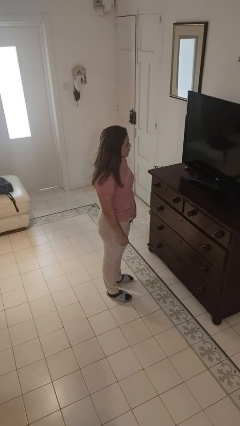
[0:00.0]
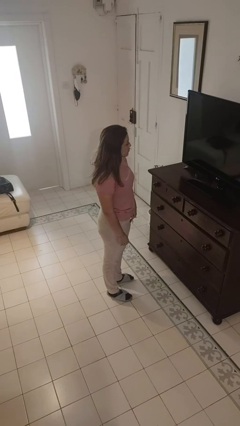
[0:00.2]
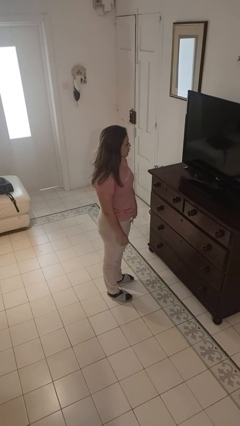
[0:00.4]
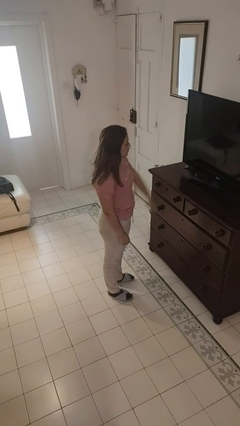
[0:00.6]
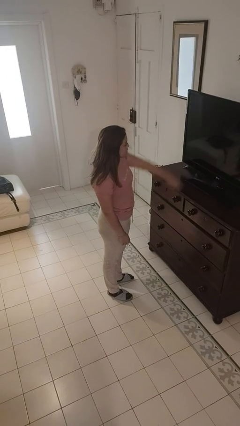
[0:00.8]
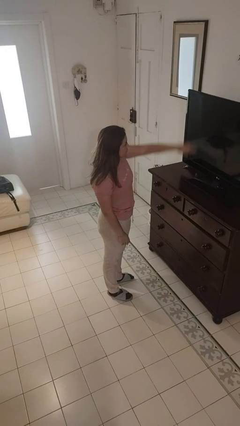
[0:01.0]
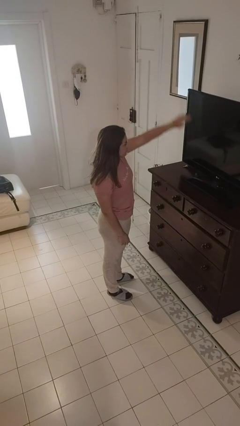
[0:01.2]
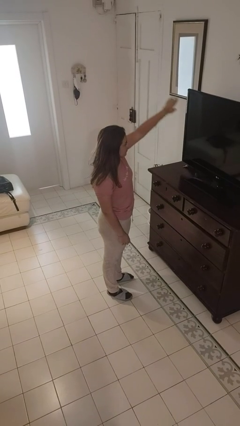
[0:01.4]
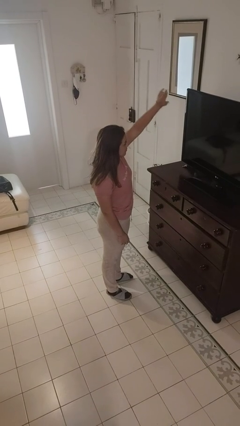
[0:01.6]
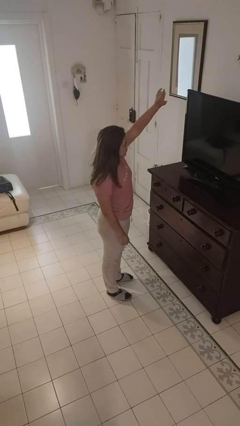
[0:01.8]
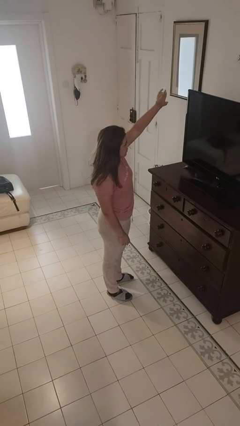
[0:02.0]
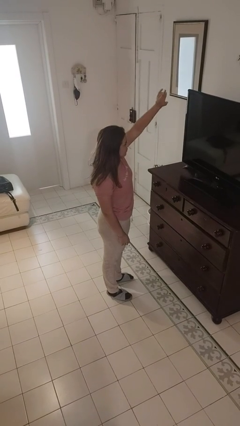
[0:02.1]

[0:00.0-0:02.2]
person gestures swipe up

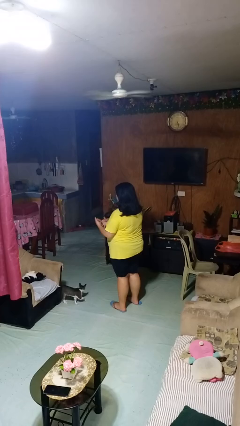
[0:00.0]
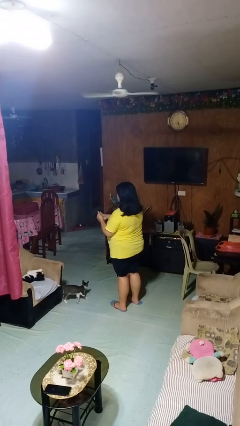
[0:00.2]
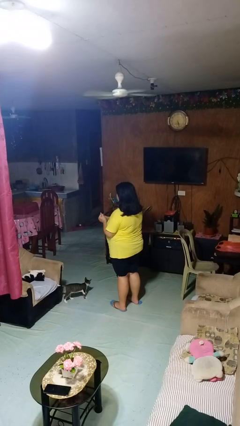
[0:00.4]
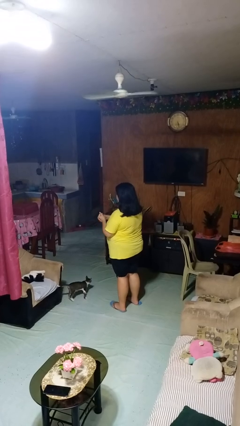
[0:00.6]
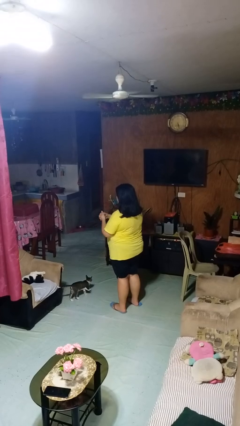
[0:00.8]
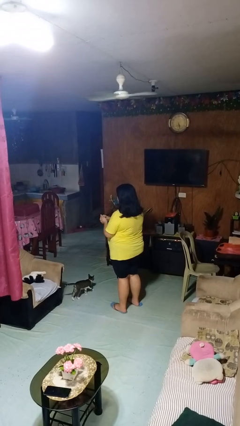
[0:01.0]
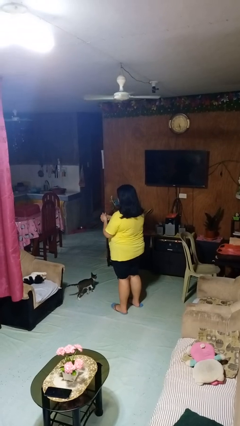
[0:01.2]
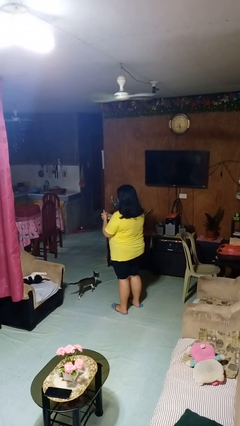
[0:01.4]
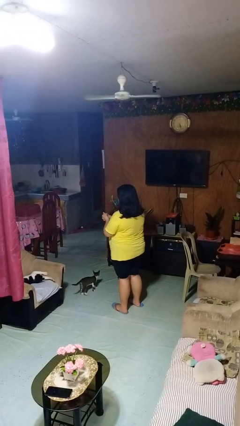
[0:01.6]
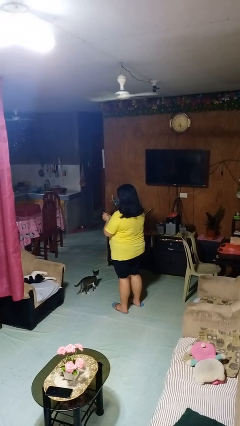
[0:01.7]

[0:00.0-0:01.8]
person cracks knuckles

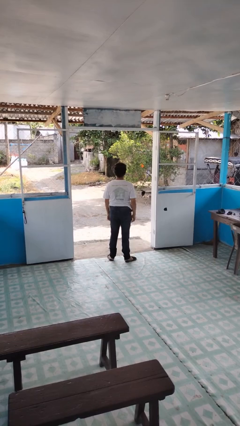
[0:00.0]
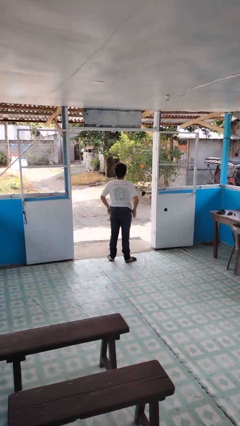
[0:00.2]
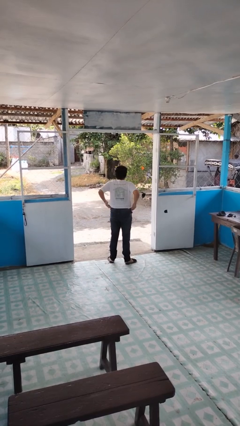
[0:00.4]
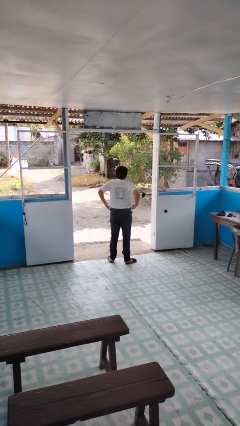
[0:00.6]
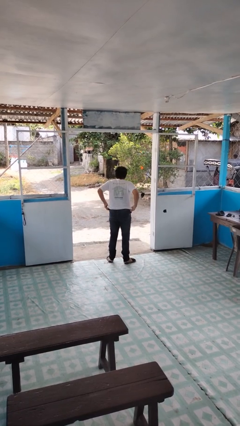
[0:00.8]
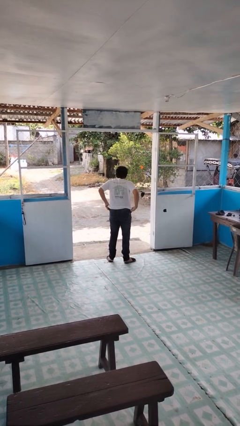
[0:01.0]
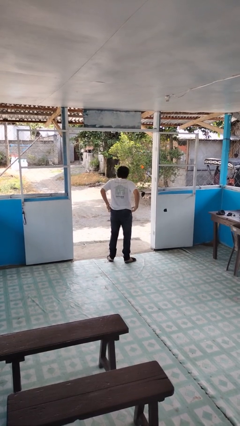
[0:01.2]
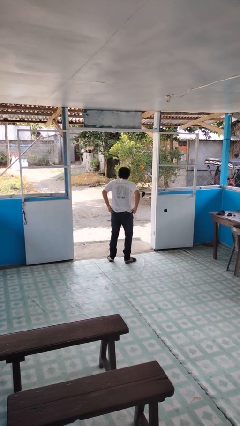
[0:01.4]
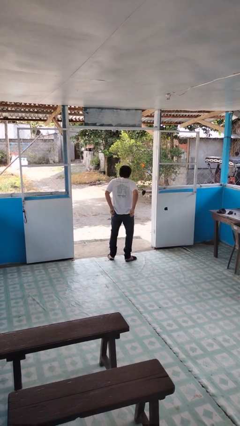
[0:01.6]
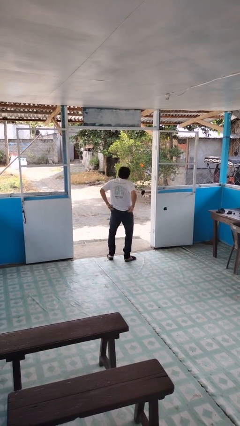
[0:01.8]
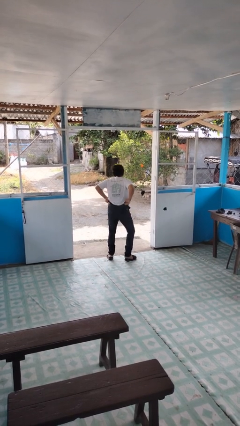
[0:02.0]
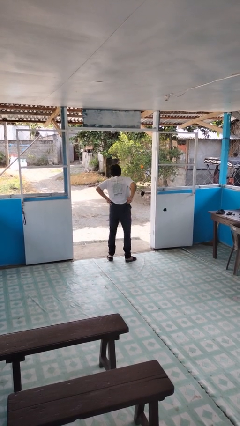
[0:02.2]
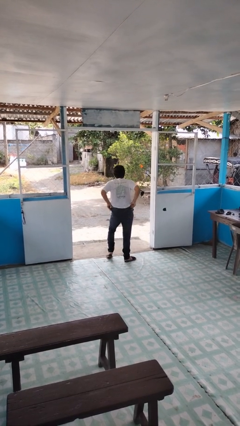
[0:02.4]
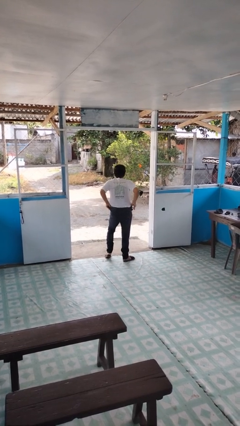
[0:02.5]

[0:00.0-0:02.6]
person hikes up pants

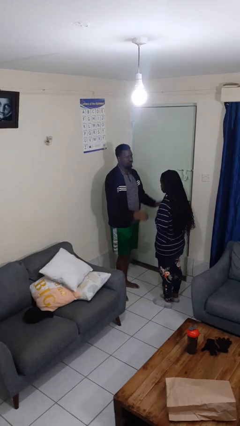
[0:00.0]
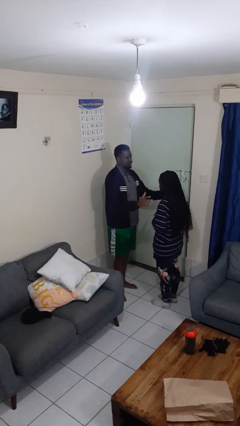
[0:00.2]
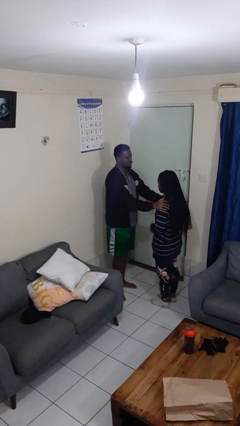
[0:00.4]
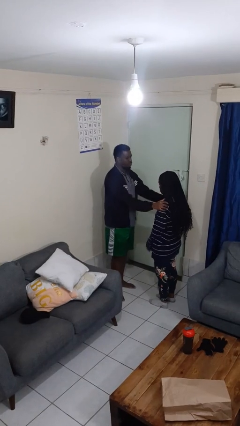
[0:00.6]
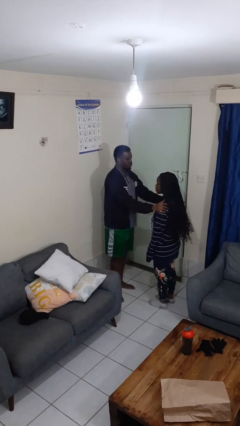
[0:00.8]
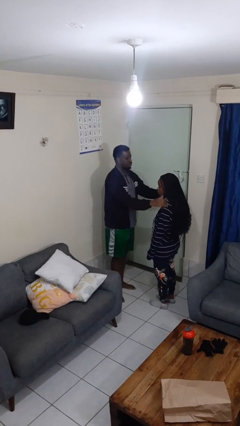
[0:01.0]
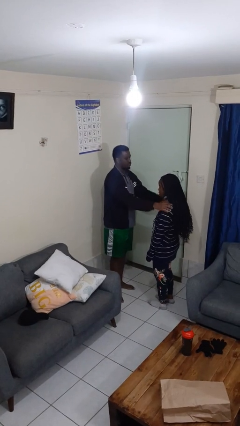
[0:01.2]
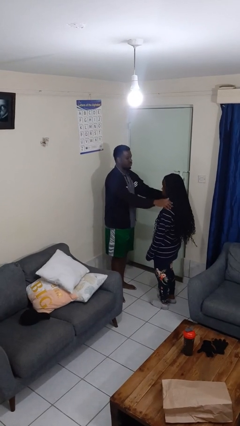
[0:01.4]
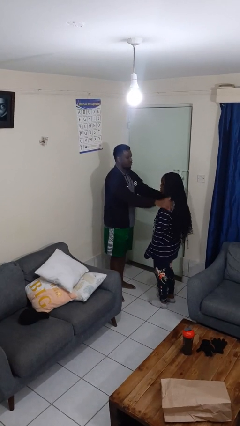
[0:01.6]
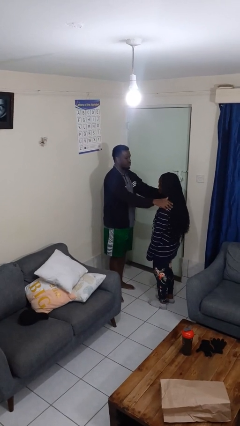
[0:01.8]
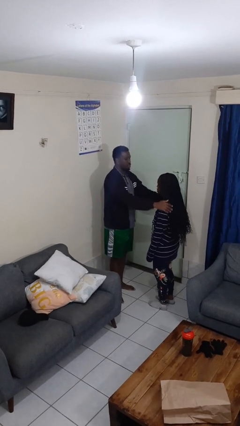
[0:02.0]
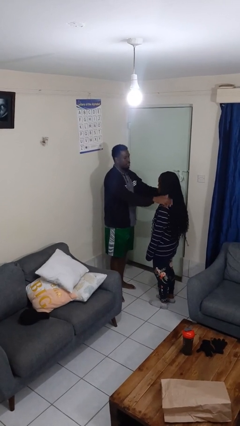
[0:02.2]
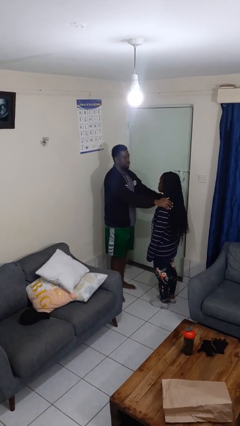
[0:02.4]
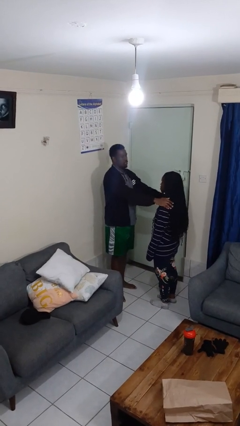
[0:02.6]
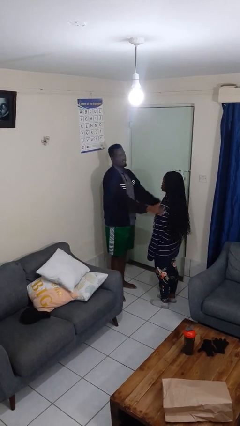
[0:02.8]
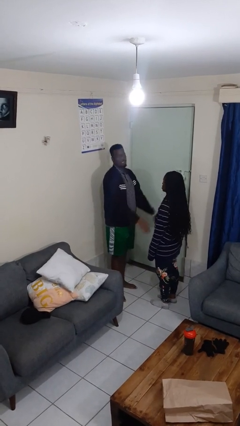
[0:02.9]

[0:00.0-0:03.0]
person pounds shoulders of person

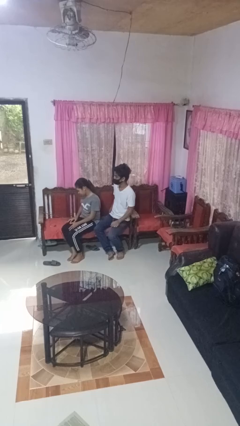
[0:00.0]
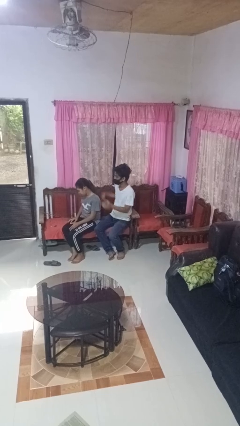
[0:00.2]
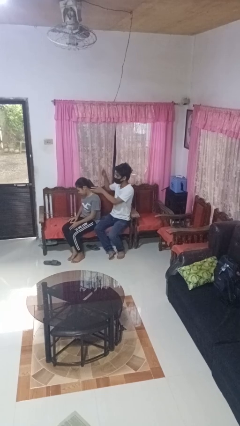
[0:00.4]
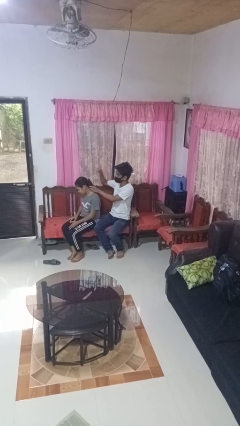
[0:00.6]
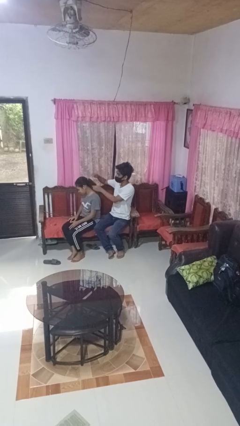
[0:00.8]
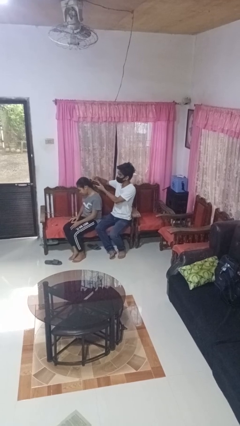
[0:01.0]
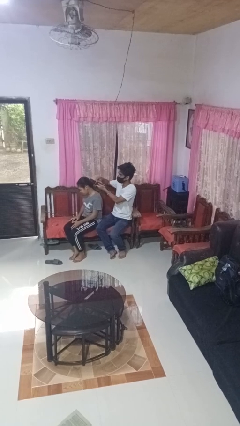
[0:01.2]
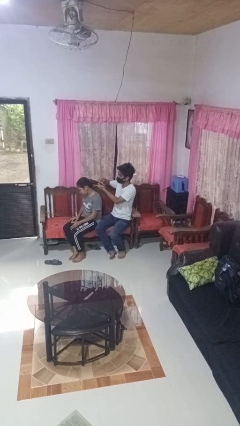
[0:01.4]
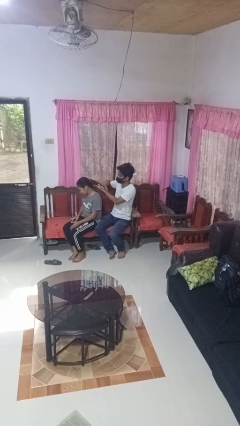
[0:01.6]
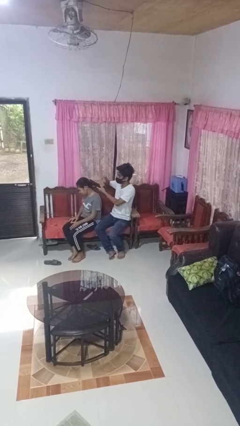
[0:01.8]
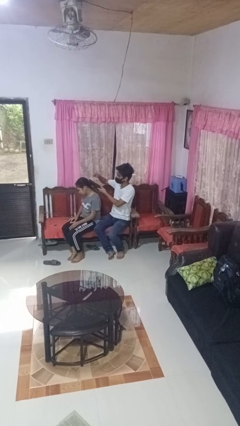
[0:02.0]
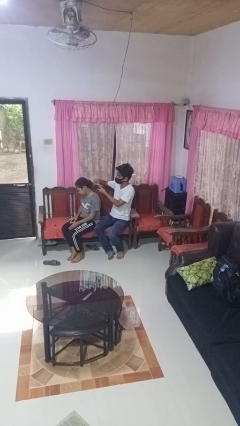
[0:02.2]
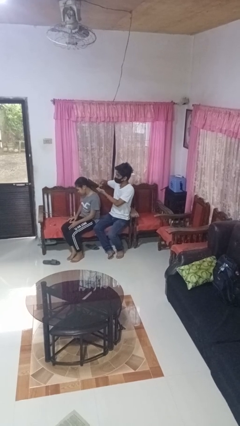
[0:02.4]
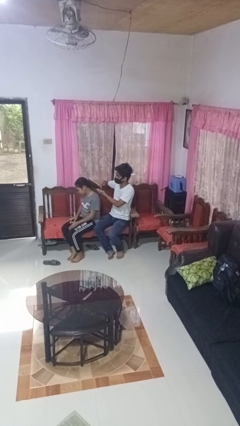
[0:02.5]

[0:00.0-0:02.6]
person brushes hair of person

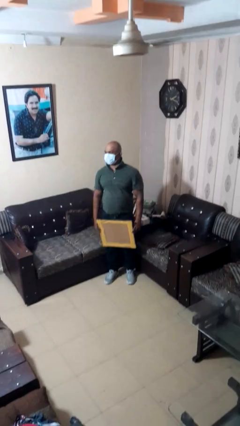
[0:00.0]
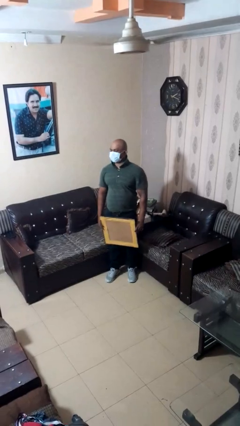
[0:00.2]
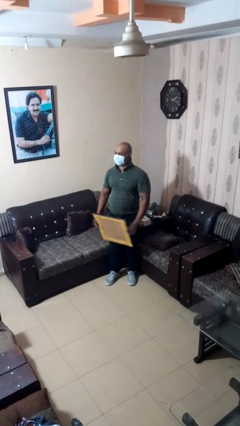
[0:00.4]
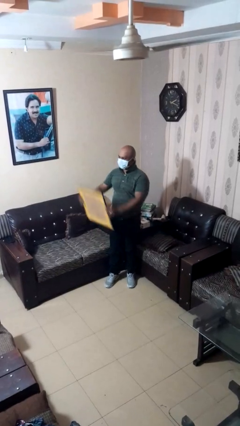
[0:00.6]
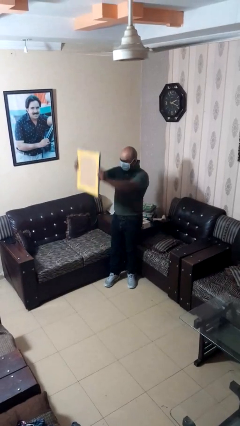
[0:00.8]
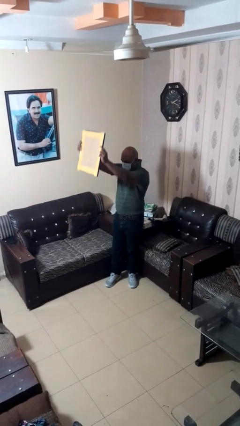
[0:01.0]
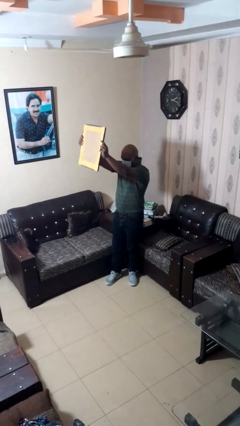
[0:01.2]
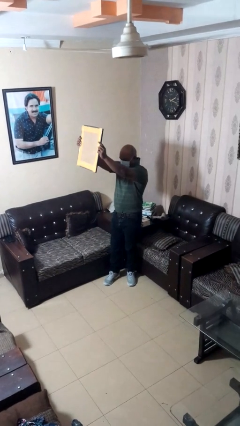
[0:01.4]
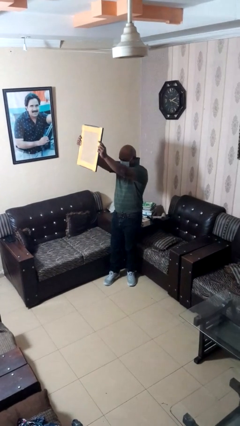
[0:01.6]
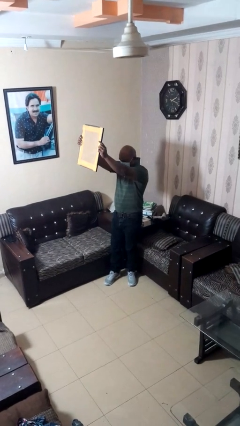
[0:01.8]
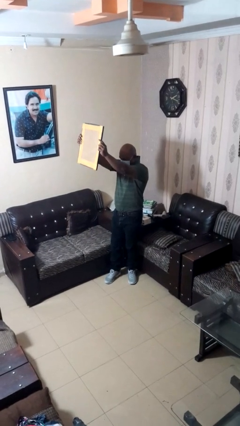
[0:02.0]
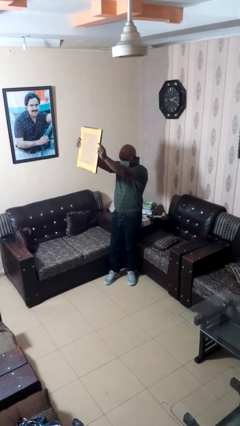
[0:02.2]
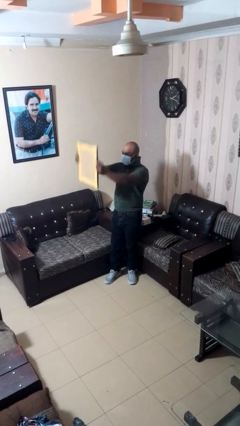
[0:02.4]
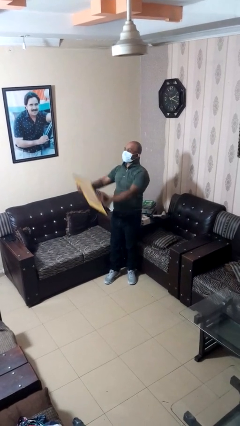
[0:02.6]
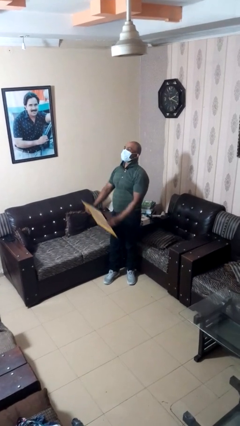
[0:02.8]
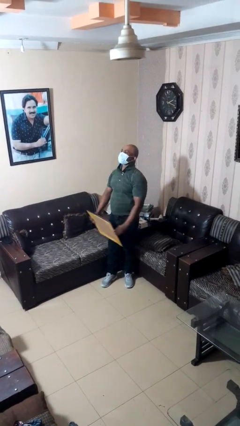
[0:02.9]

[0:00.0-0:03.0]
person holds object above head

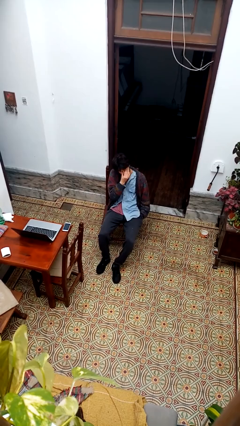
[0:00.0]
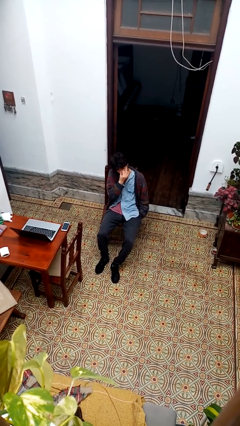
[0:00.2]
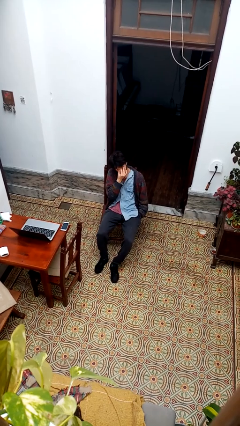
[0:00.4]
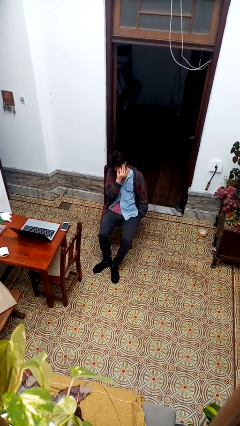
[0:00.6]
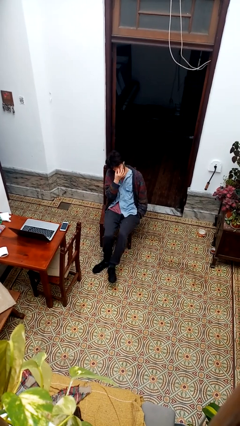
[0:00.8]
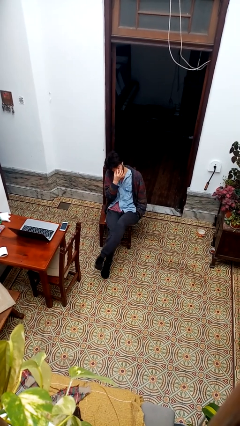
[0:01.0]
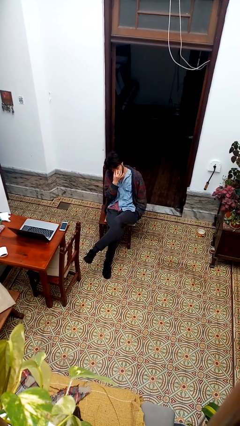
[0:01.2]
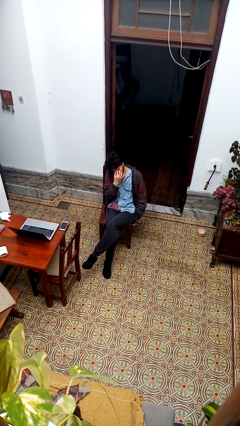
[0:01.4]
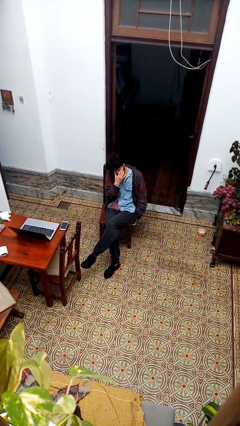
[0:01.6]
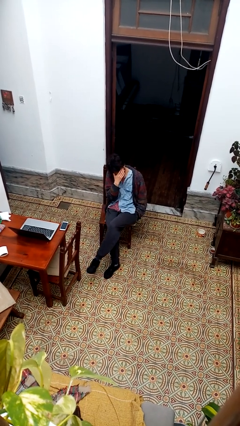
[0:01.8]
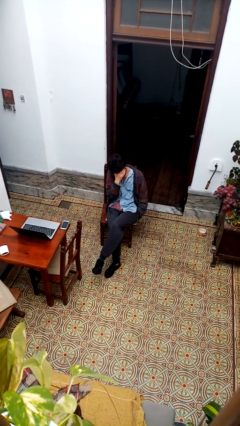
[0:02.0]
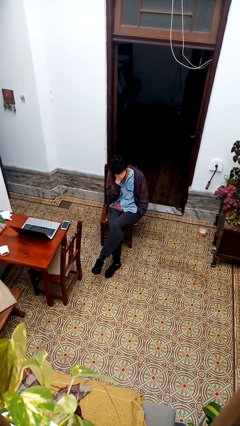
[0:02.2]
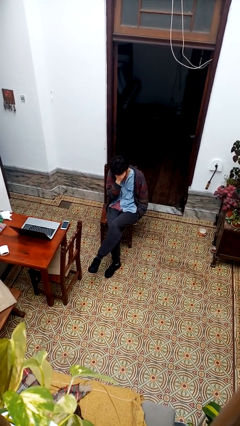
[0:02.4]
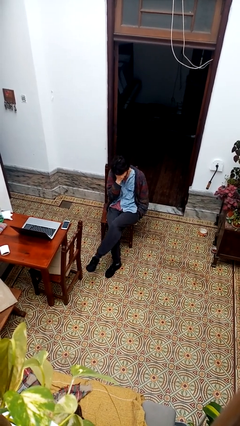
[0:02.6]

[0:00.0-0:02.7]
person crosses legs
